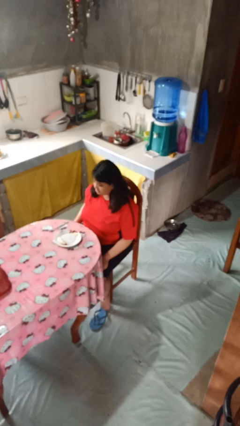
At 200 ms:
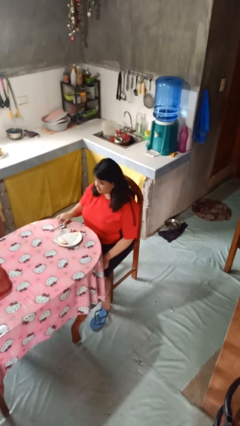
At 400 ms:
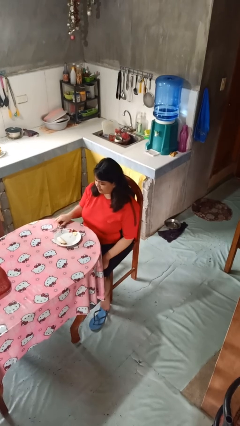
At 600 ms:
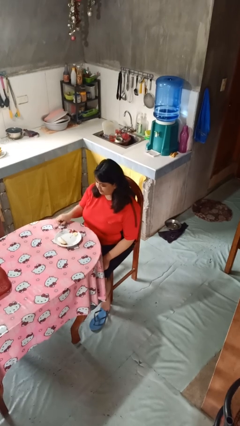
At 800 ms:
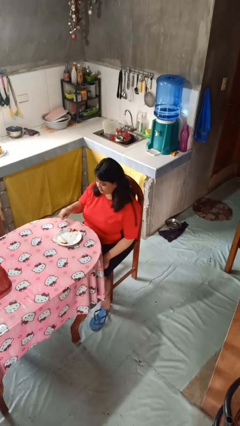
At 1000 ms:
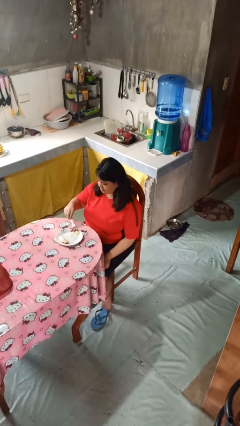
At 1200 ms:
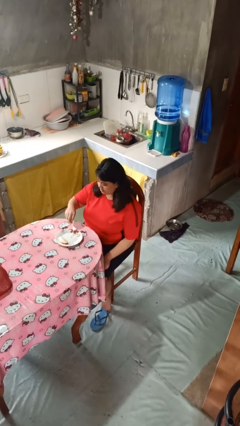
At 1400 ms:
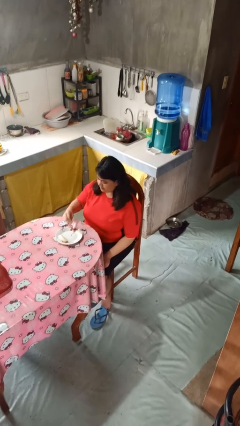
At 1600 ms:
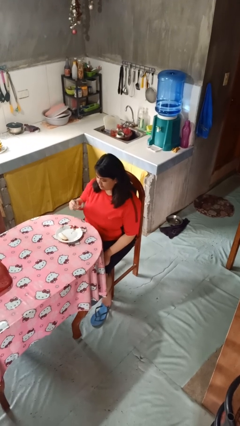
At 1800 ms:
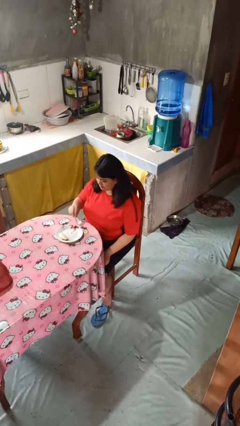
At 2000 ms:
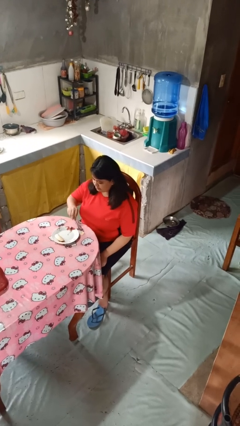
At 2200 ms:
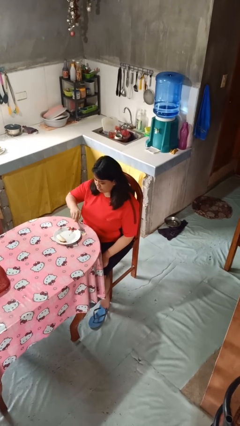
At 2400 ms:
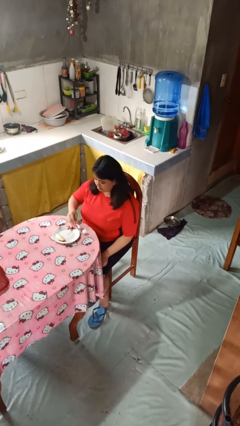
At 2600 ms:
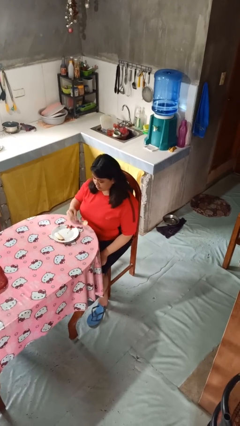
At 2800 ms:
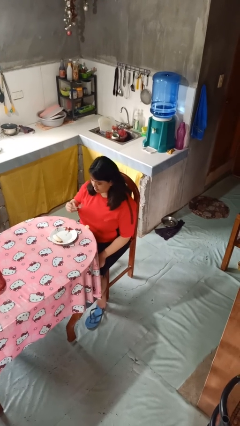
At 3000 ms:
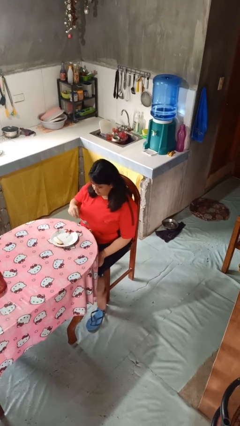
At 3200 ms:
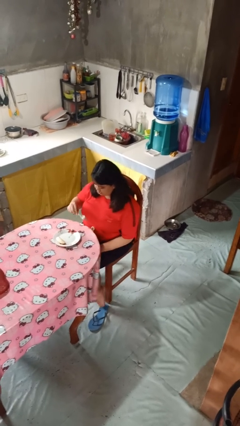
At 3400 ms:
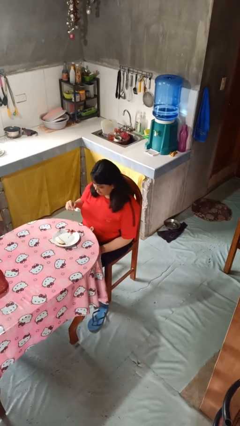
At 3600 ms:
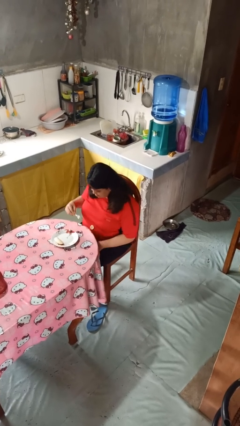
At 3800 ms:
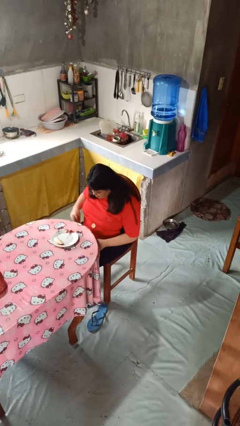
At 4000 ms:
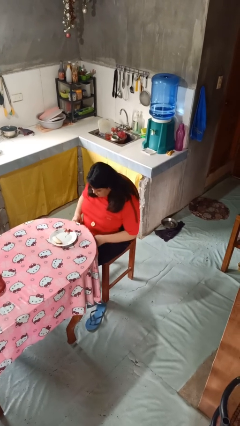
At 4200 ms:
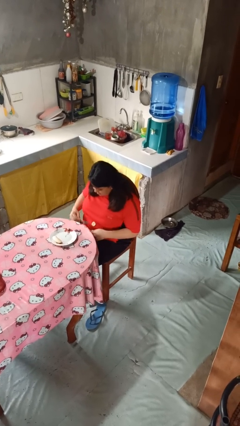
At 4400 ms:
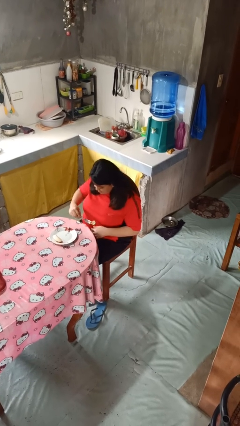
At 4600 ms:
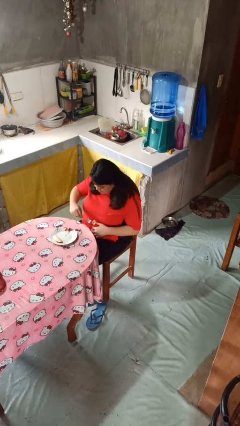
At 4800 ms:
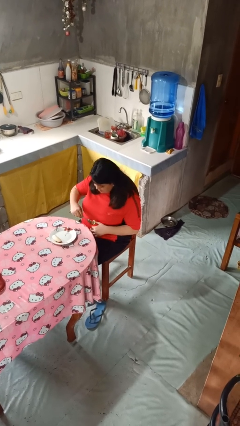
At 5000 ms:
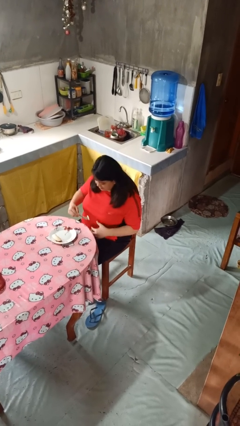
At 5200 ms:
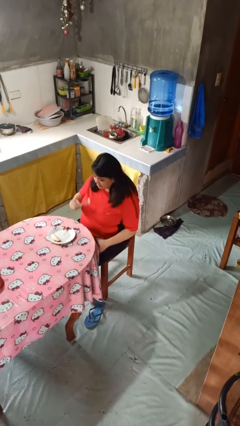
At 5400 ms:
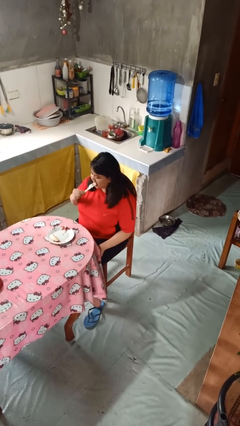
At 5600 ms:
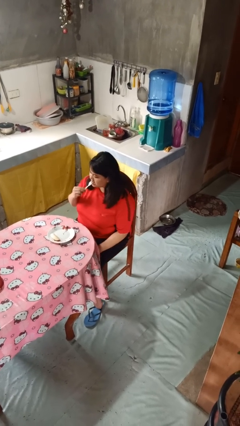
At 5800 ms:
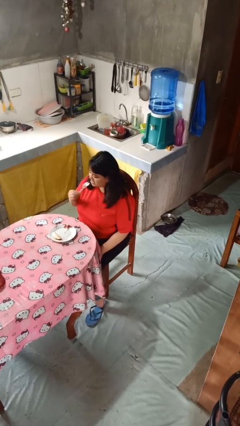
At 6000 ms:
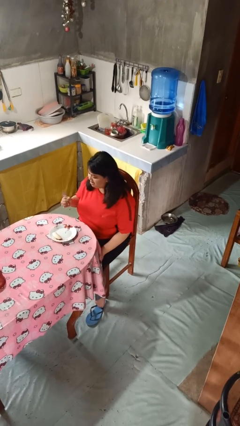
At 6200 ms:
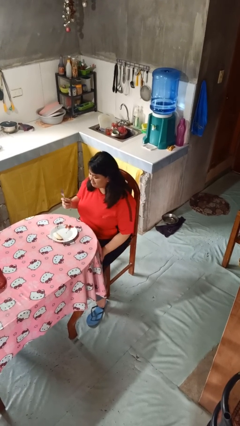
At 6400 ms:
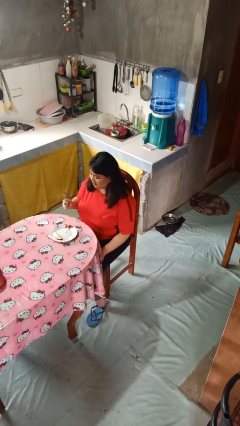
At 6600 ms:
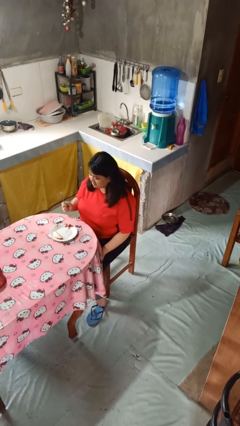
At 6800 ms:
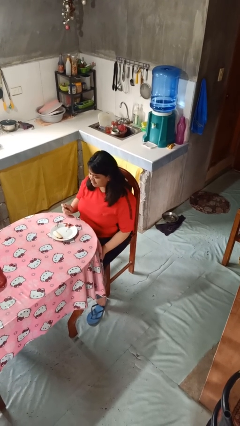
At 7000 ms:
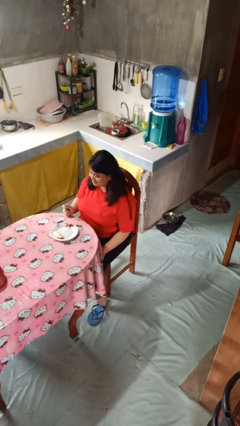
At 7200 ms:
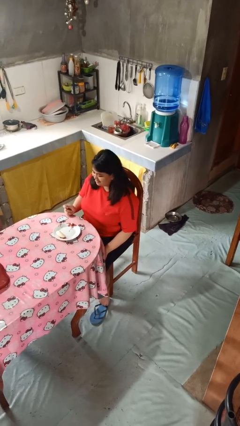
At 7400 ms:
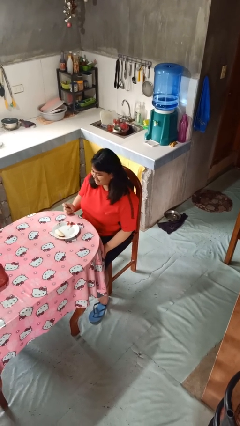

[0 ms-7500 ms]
person eats with utensil

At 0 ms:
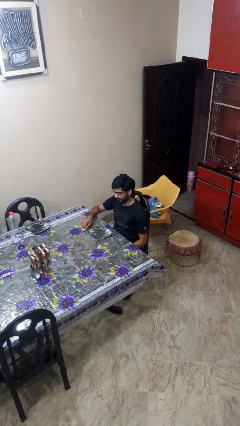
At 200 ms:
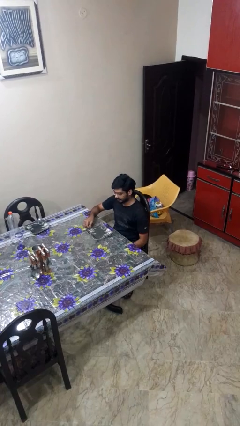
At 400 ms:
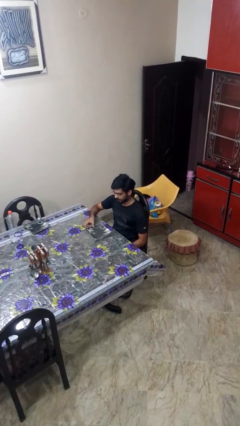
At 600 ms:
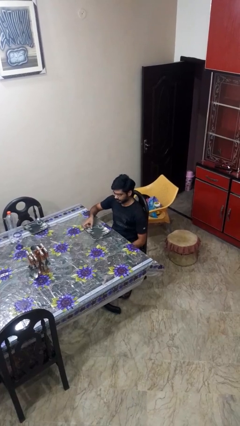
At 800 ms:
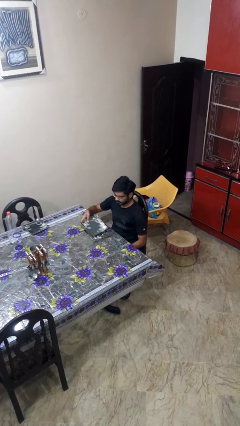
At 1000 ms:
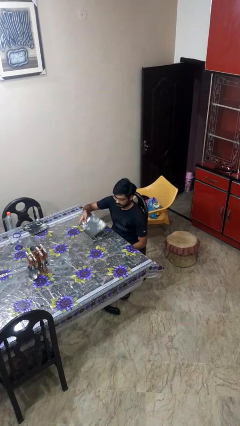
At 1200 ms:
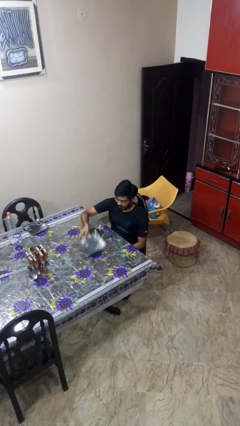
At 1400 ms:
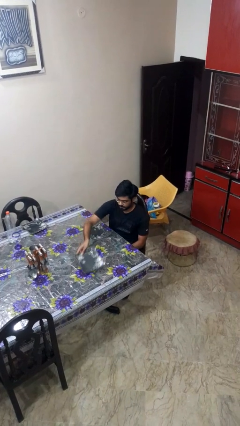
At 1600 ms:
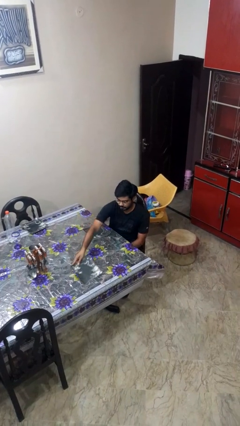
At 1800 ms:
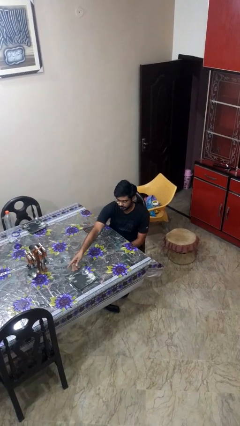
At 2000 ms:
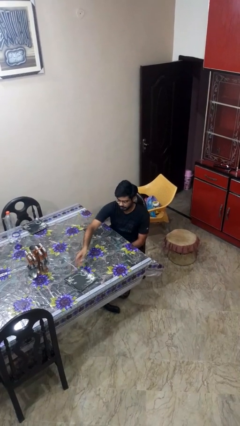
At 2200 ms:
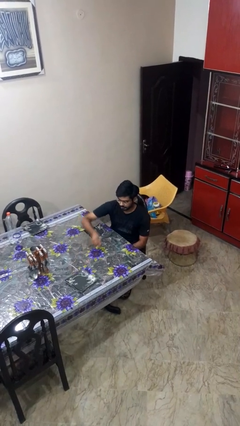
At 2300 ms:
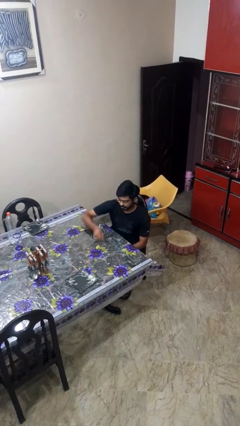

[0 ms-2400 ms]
person sets table

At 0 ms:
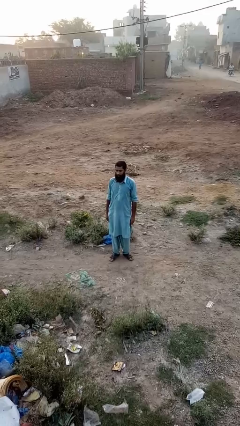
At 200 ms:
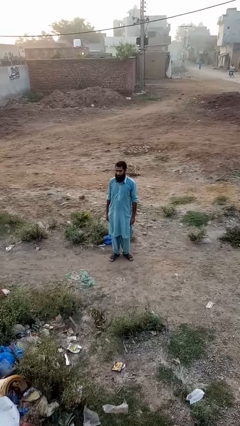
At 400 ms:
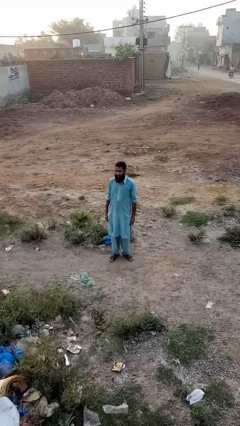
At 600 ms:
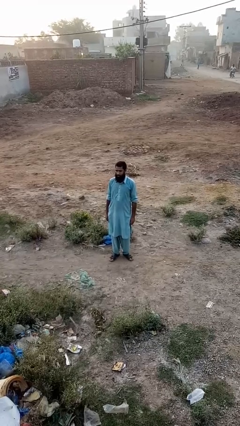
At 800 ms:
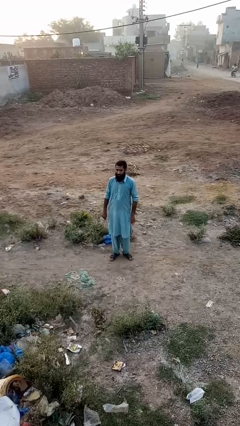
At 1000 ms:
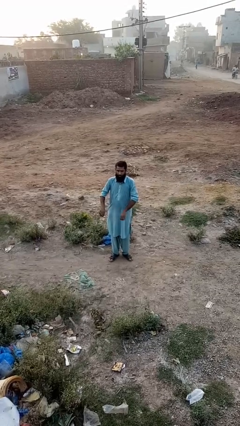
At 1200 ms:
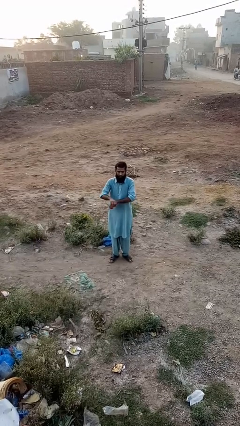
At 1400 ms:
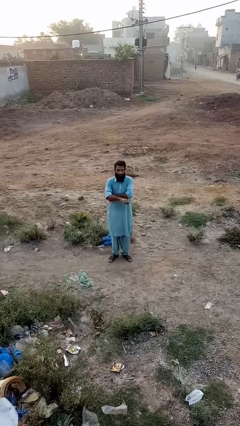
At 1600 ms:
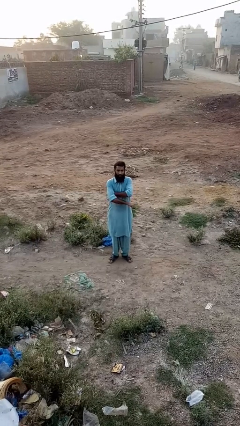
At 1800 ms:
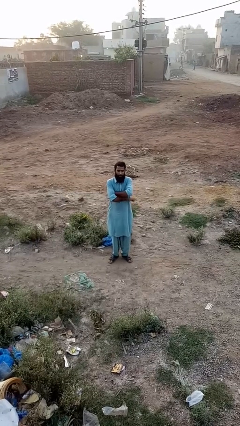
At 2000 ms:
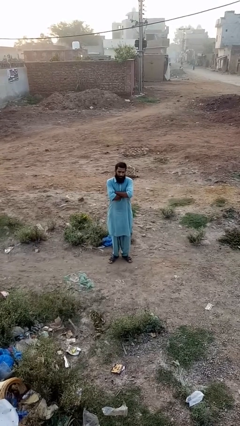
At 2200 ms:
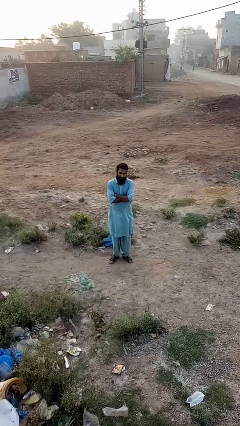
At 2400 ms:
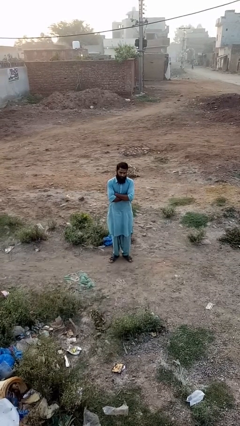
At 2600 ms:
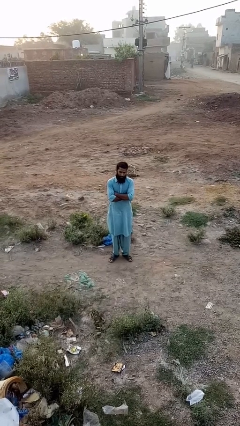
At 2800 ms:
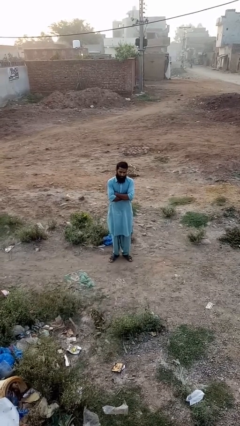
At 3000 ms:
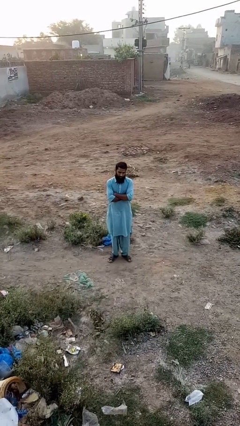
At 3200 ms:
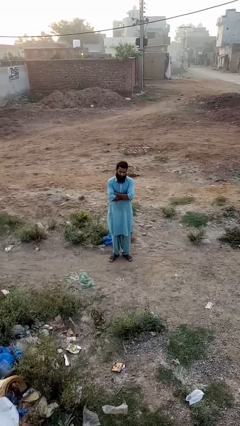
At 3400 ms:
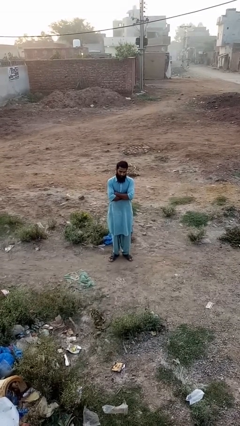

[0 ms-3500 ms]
person crosses arms

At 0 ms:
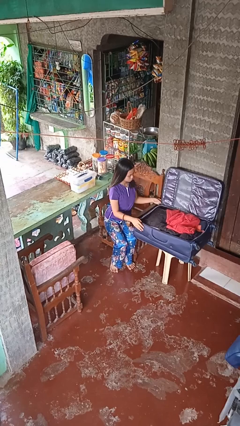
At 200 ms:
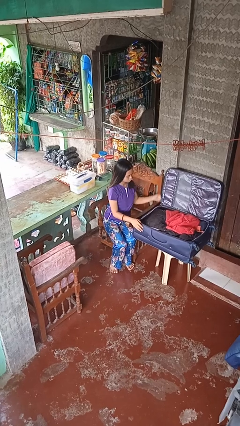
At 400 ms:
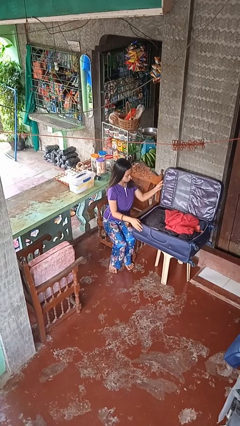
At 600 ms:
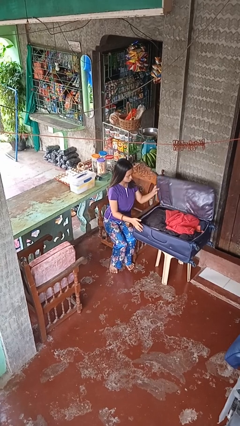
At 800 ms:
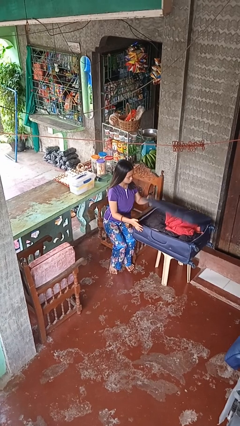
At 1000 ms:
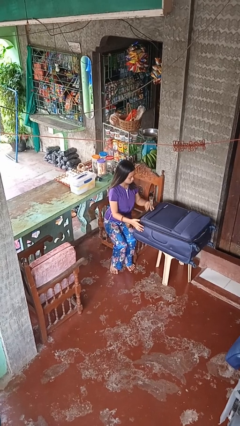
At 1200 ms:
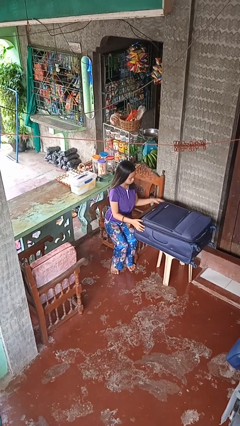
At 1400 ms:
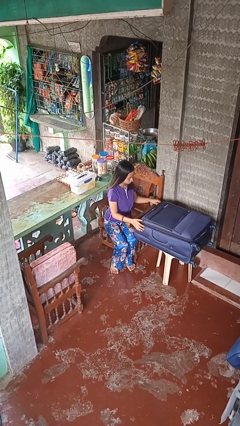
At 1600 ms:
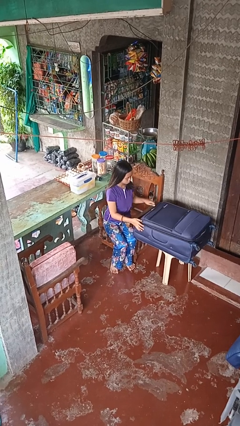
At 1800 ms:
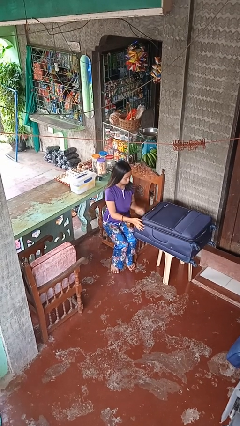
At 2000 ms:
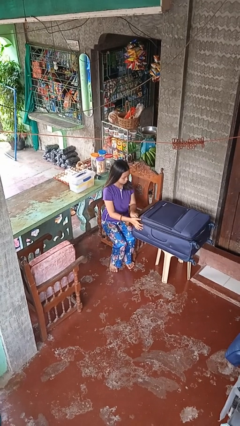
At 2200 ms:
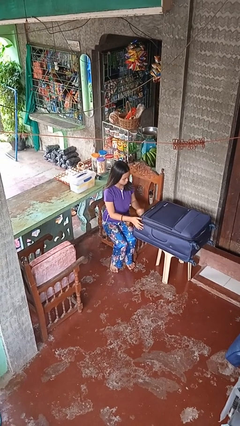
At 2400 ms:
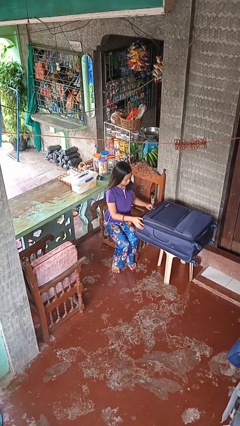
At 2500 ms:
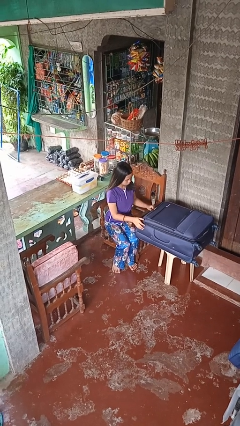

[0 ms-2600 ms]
person closes suitcase

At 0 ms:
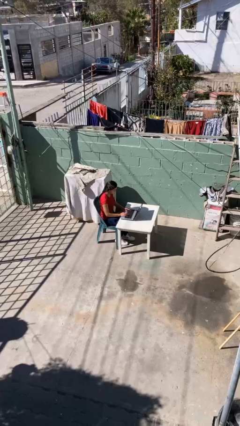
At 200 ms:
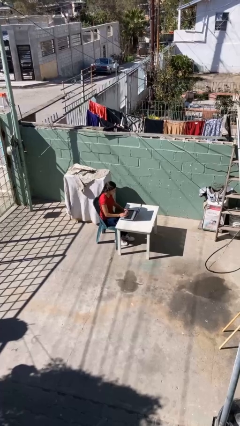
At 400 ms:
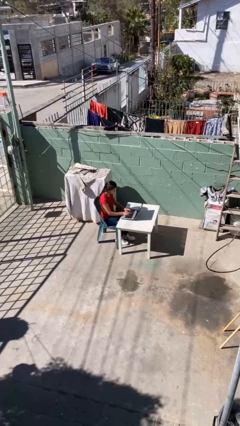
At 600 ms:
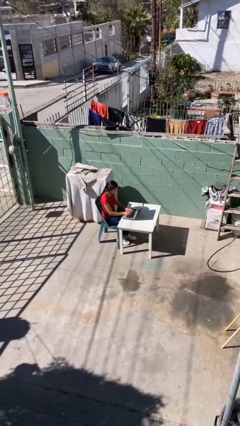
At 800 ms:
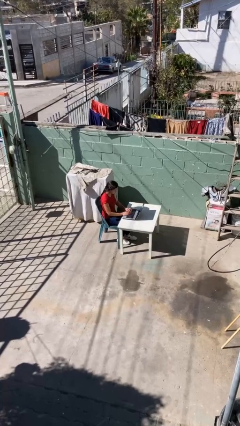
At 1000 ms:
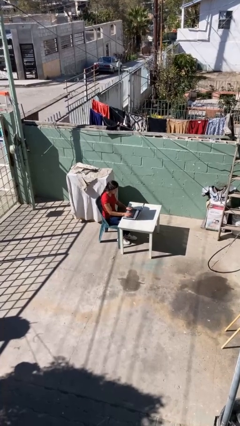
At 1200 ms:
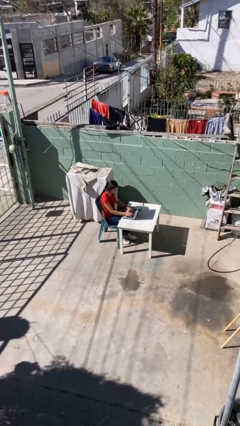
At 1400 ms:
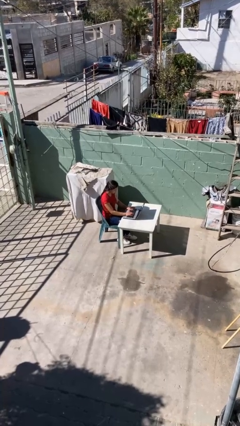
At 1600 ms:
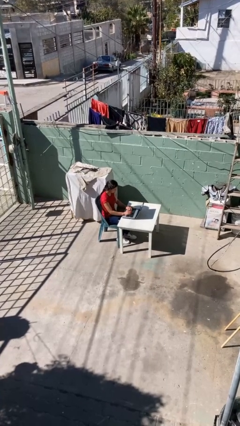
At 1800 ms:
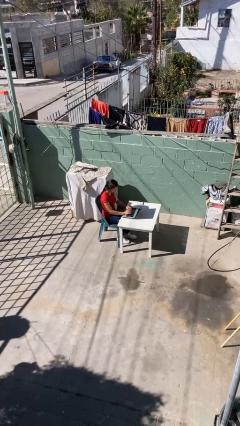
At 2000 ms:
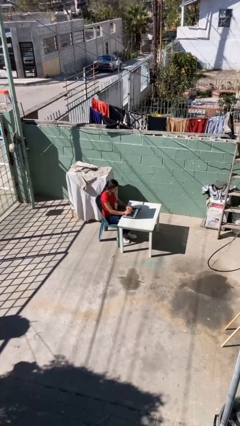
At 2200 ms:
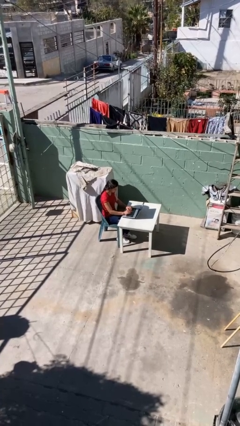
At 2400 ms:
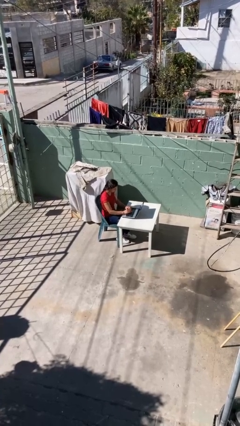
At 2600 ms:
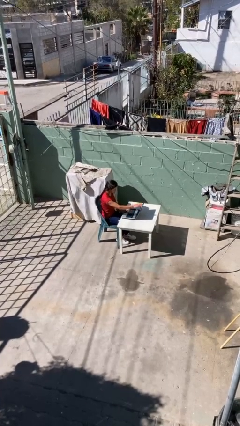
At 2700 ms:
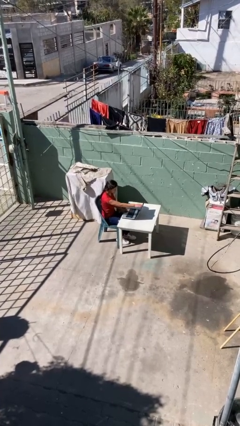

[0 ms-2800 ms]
person interacts with laptop
